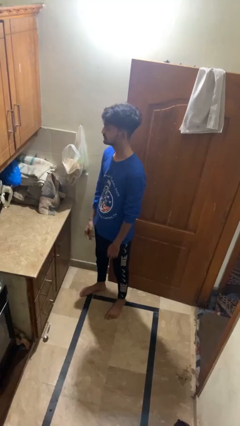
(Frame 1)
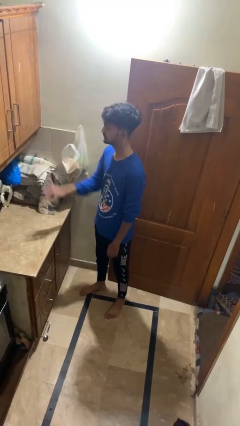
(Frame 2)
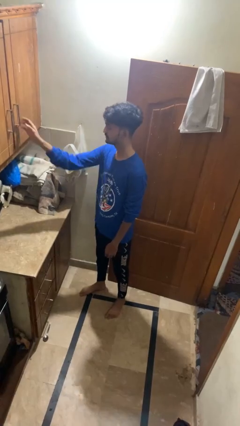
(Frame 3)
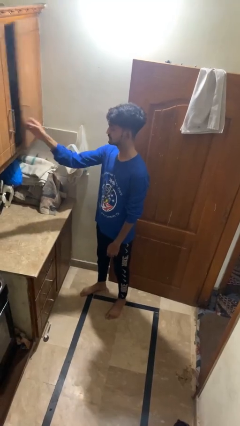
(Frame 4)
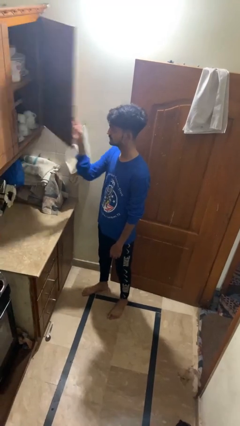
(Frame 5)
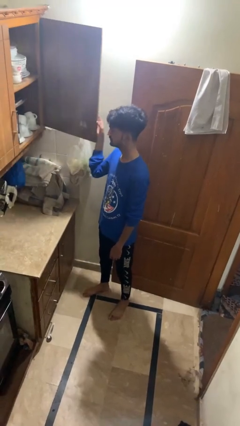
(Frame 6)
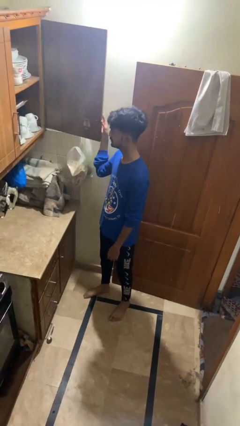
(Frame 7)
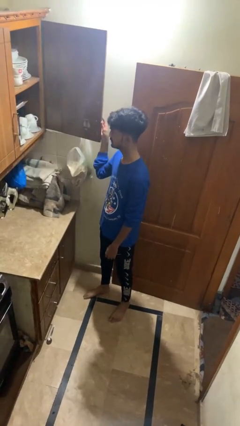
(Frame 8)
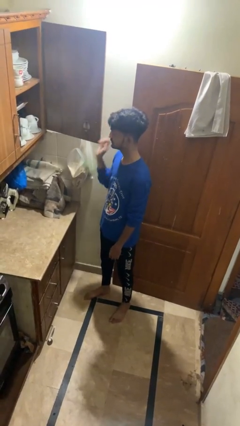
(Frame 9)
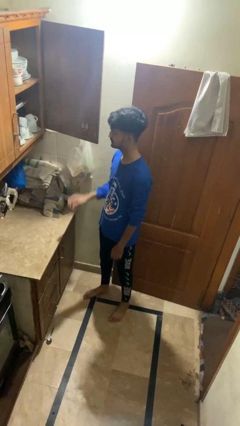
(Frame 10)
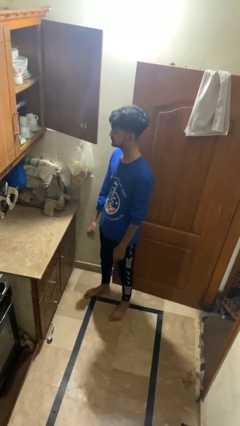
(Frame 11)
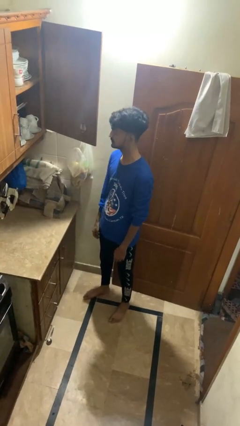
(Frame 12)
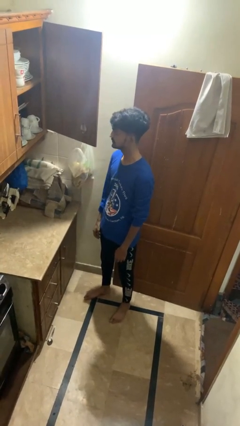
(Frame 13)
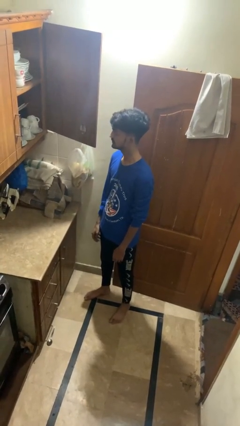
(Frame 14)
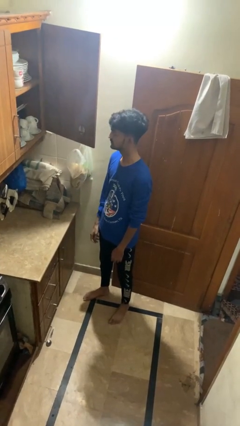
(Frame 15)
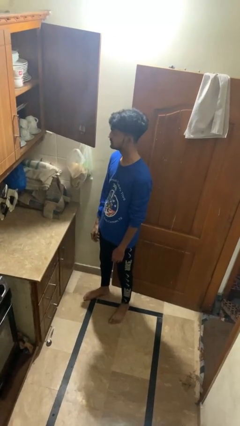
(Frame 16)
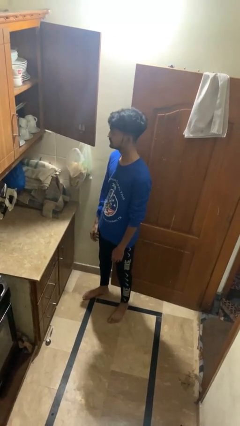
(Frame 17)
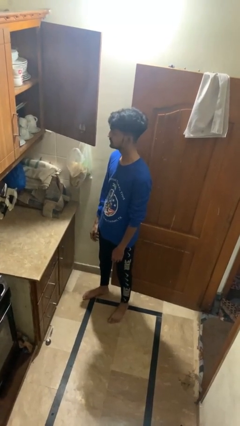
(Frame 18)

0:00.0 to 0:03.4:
person opens cabinet

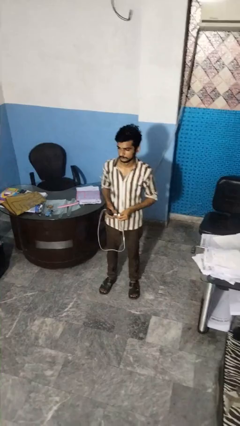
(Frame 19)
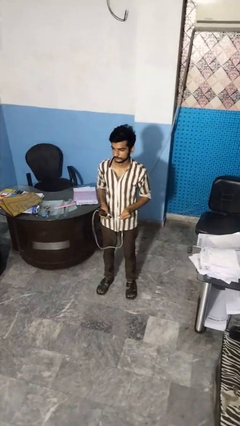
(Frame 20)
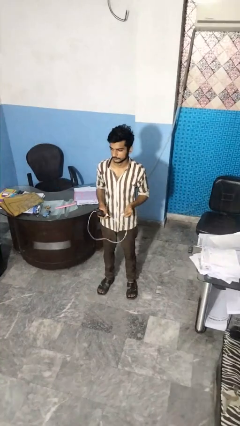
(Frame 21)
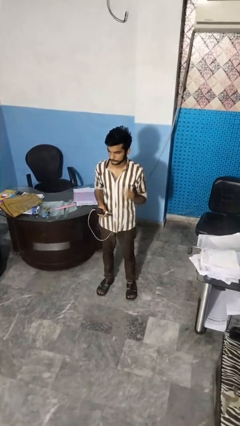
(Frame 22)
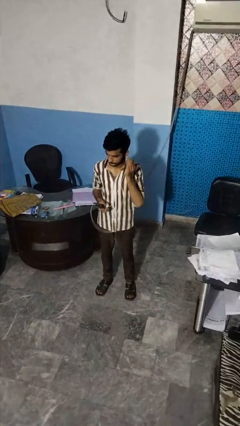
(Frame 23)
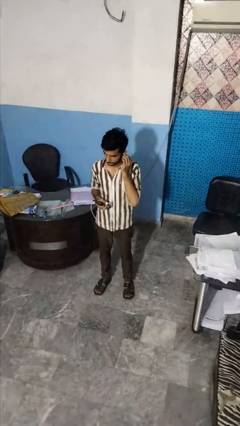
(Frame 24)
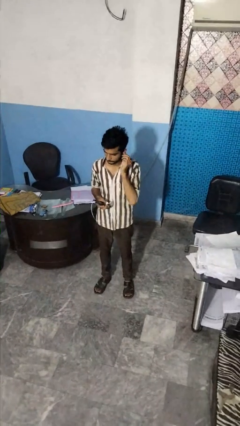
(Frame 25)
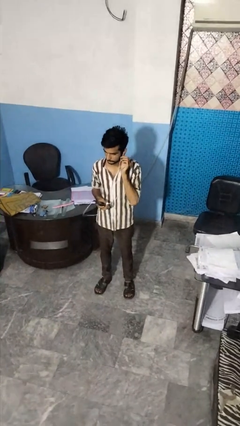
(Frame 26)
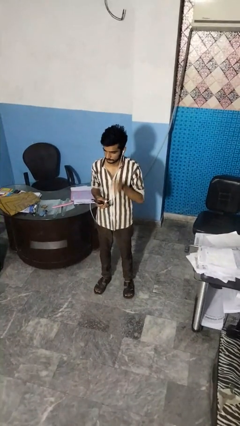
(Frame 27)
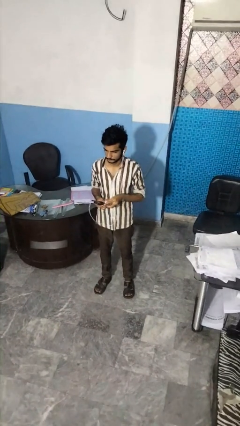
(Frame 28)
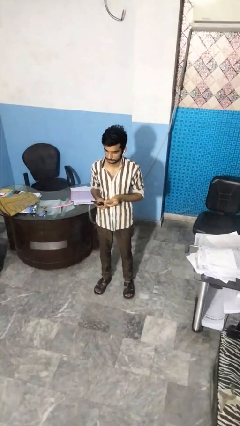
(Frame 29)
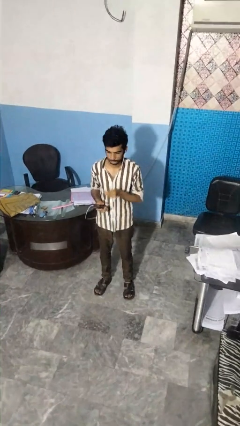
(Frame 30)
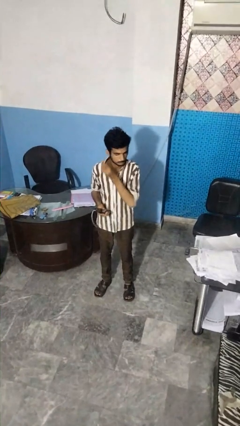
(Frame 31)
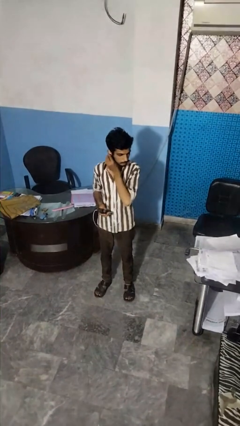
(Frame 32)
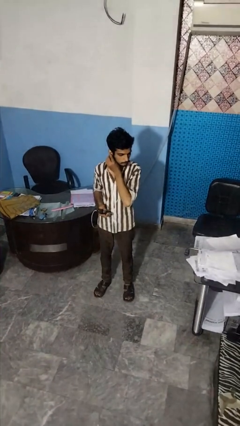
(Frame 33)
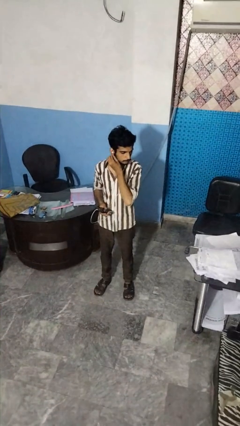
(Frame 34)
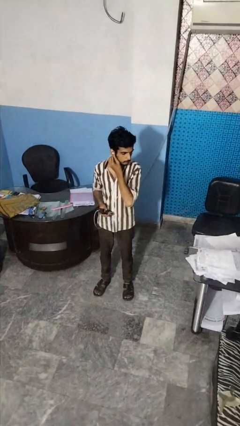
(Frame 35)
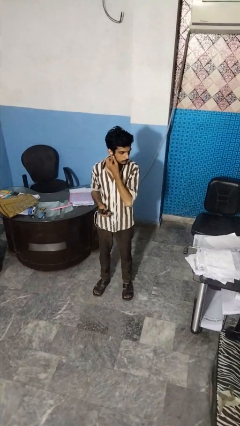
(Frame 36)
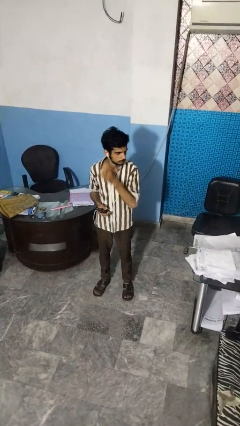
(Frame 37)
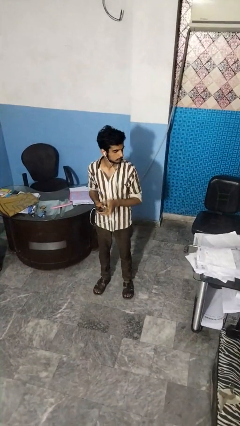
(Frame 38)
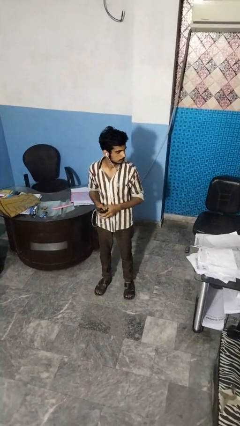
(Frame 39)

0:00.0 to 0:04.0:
person puts on headphones

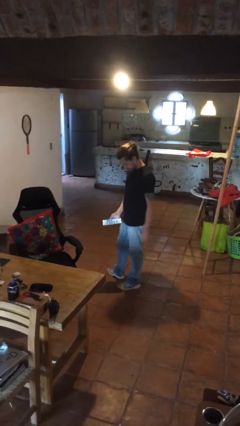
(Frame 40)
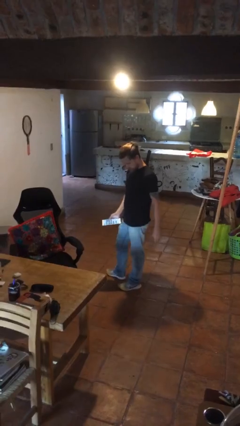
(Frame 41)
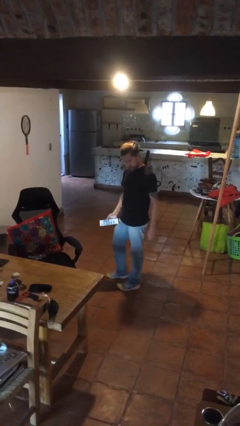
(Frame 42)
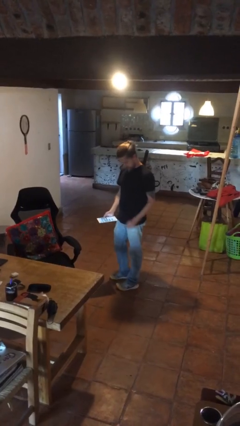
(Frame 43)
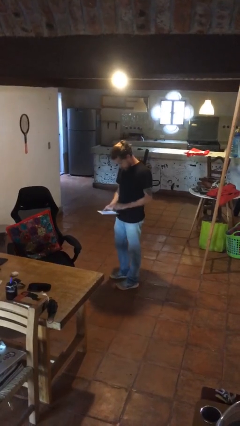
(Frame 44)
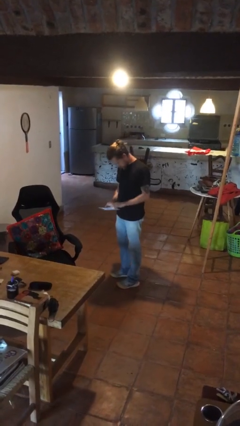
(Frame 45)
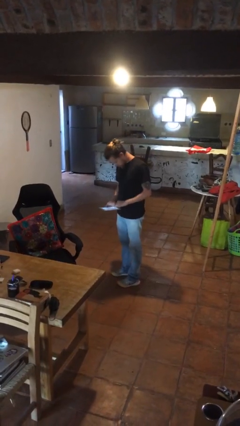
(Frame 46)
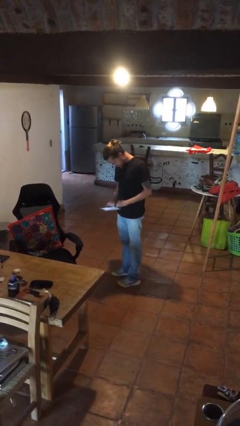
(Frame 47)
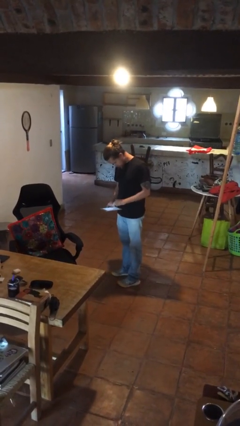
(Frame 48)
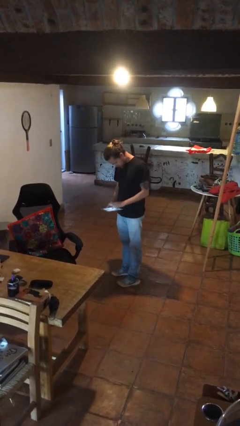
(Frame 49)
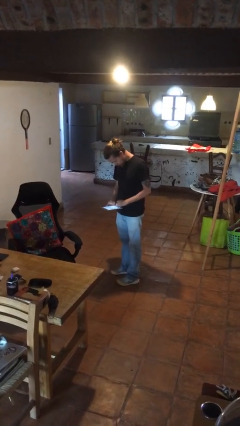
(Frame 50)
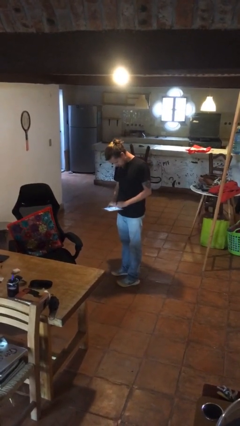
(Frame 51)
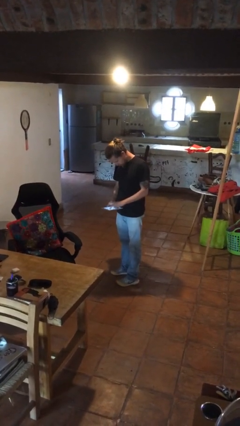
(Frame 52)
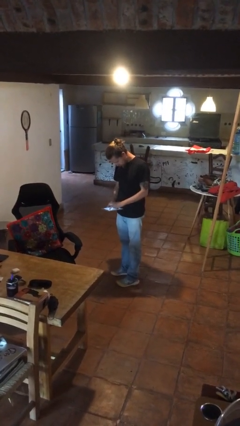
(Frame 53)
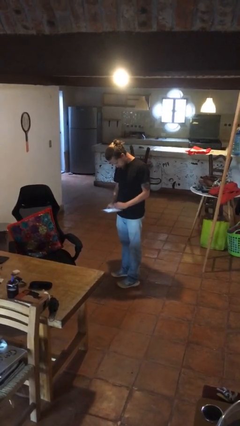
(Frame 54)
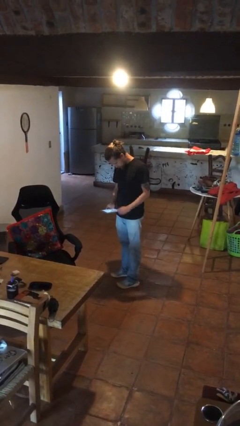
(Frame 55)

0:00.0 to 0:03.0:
person interacts with tablet

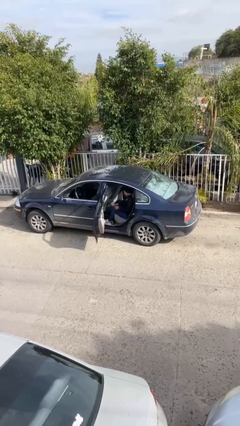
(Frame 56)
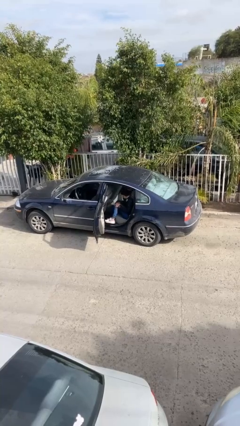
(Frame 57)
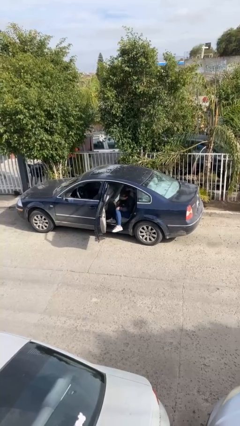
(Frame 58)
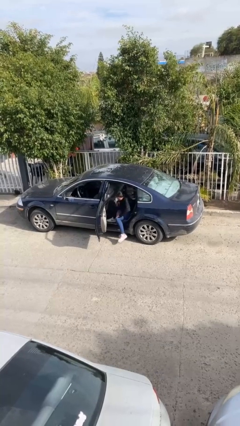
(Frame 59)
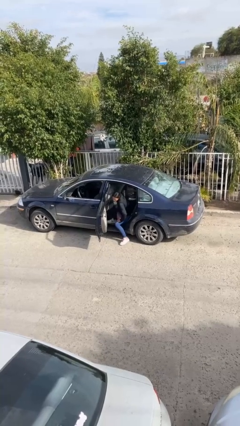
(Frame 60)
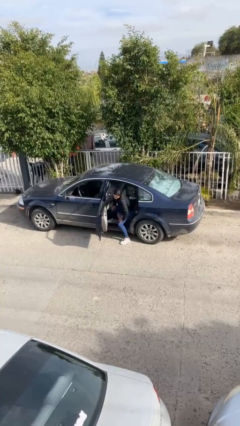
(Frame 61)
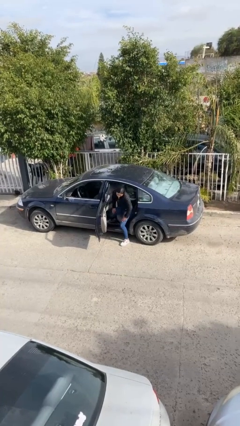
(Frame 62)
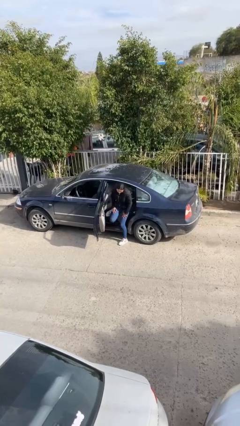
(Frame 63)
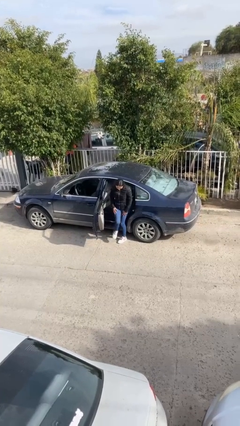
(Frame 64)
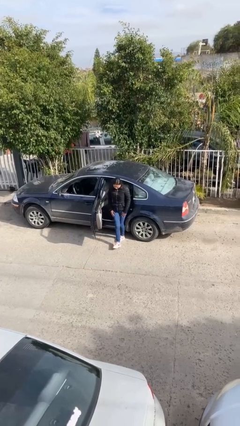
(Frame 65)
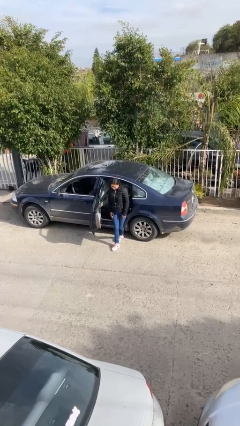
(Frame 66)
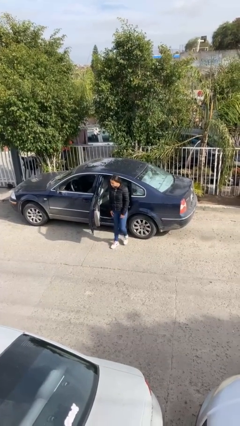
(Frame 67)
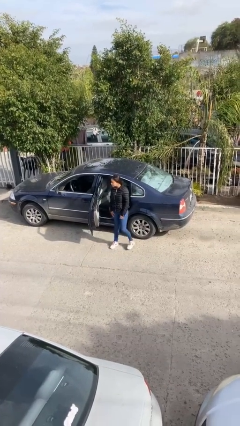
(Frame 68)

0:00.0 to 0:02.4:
person exits car

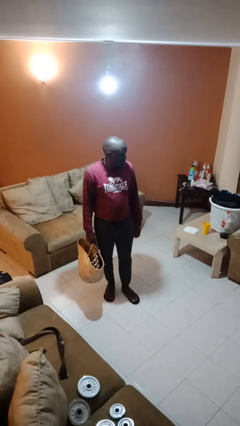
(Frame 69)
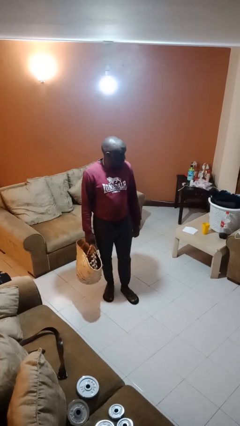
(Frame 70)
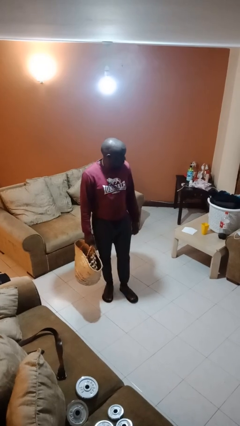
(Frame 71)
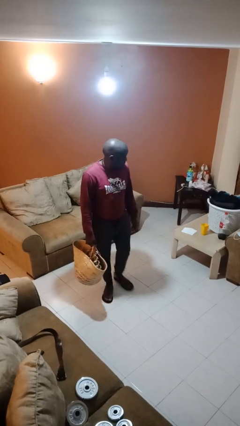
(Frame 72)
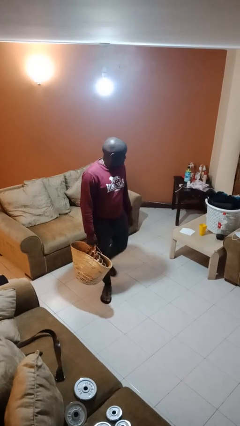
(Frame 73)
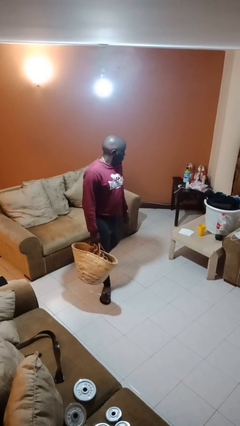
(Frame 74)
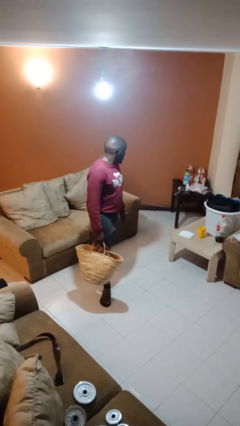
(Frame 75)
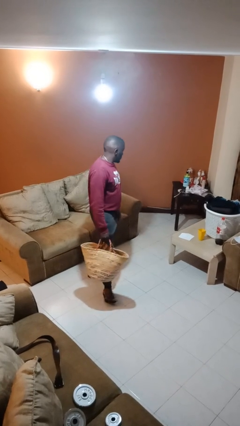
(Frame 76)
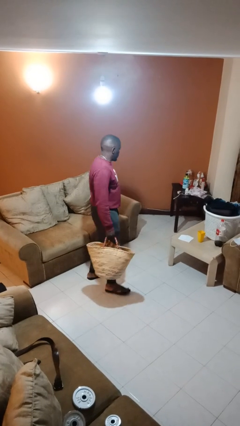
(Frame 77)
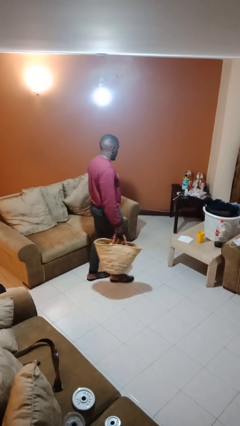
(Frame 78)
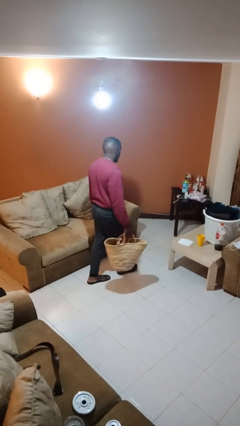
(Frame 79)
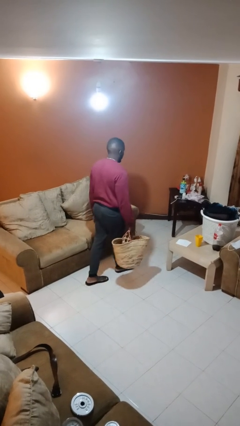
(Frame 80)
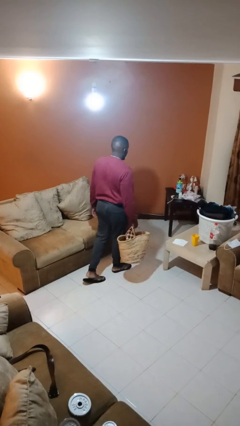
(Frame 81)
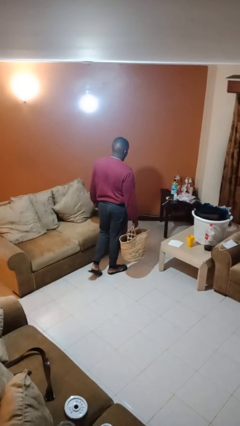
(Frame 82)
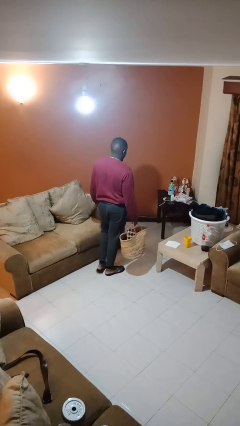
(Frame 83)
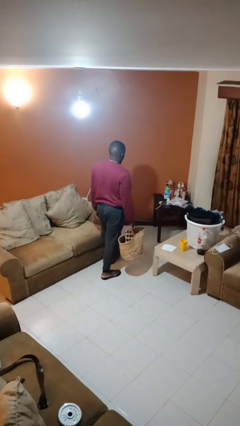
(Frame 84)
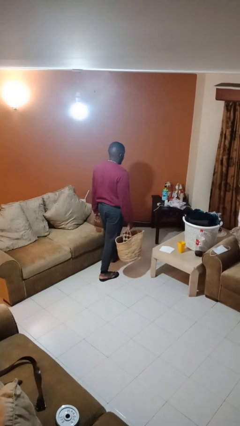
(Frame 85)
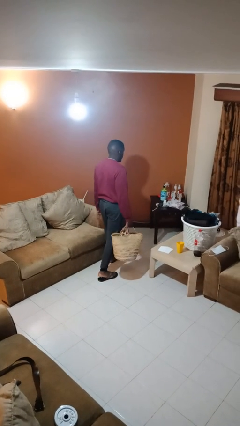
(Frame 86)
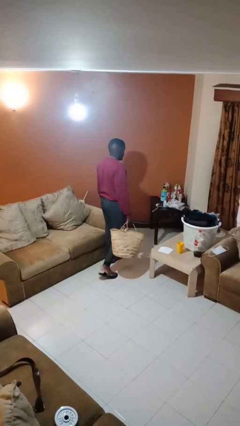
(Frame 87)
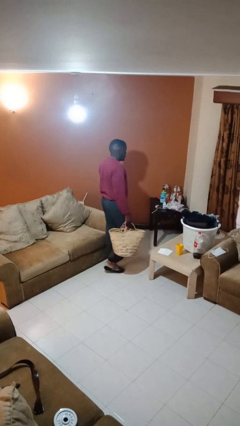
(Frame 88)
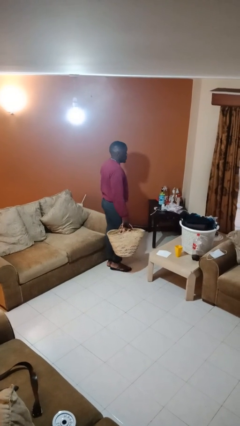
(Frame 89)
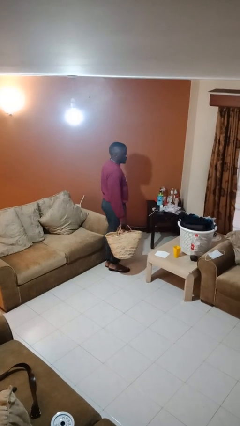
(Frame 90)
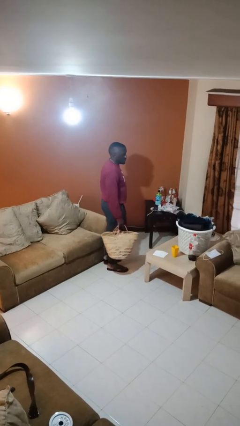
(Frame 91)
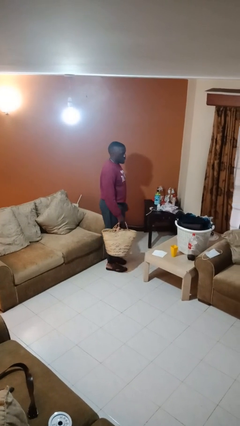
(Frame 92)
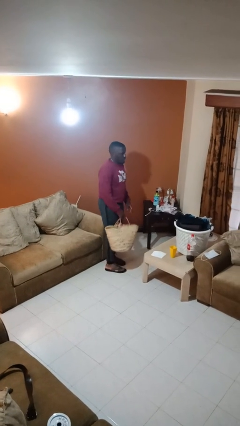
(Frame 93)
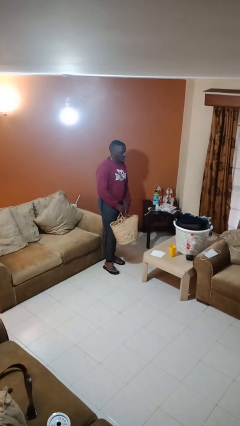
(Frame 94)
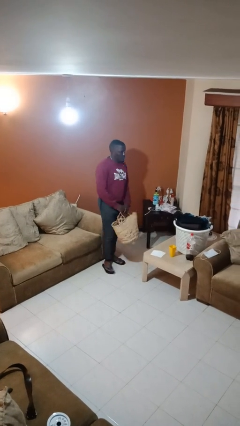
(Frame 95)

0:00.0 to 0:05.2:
person carries groceries
